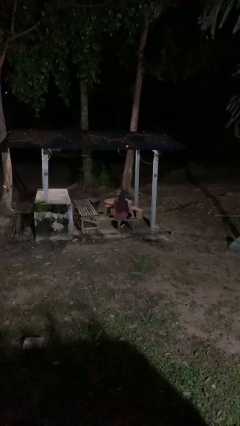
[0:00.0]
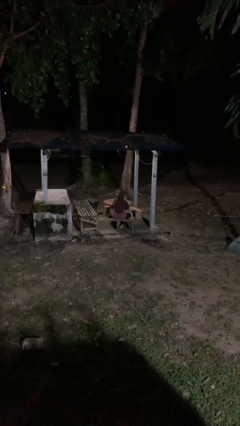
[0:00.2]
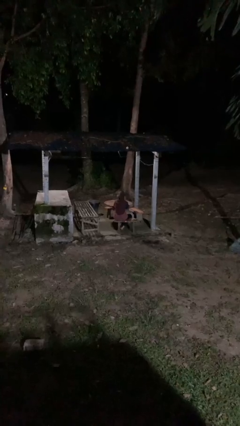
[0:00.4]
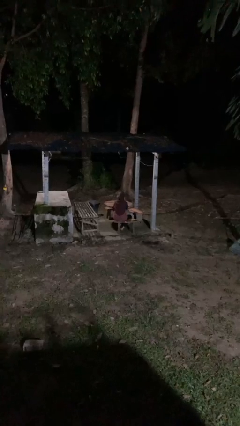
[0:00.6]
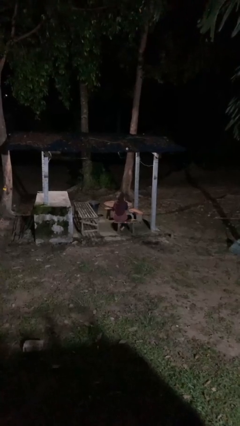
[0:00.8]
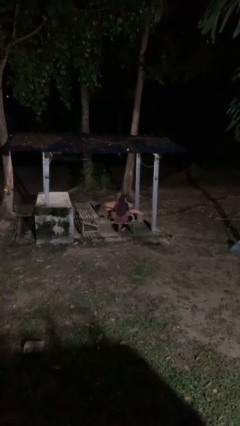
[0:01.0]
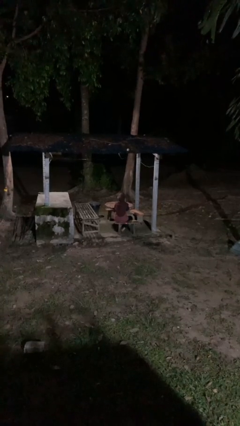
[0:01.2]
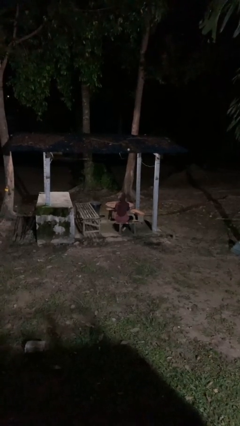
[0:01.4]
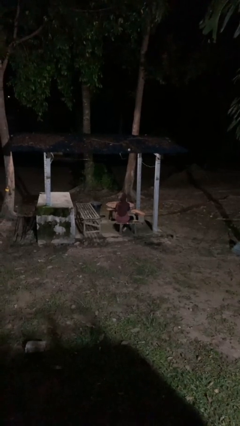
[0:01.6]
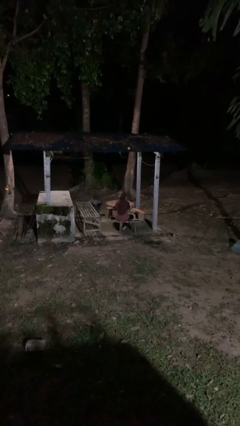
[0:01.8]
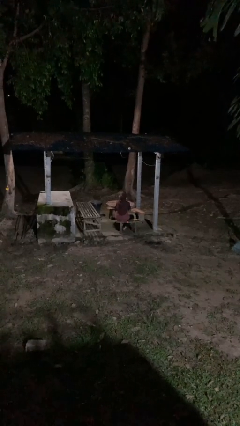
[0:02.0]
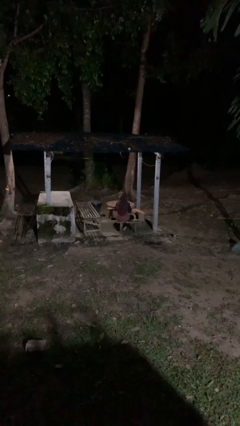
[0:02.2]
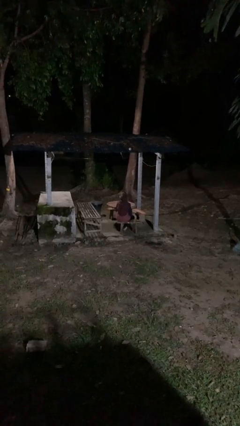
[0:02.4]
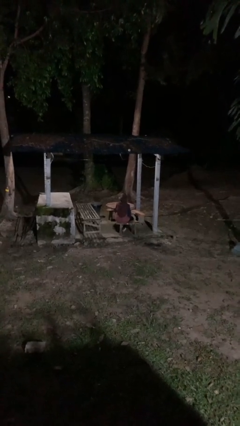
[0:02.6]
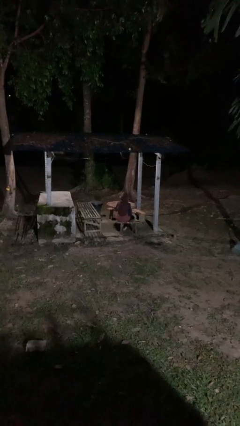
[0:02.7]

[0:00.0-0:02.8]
person strokes chin

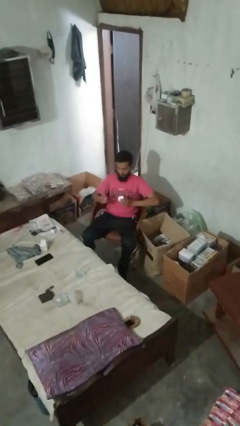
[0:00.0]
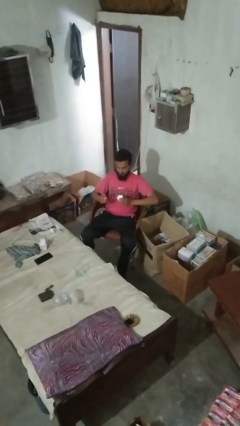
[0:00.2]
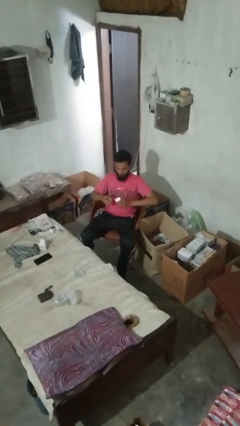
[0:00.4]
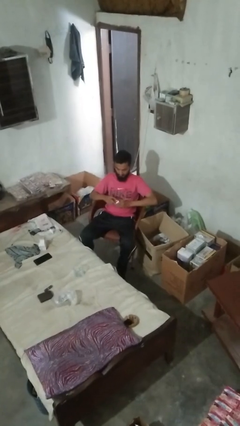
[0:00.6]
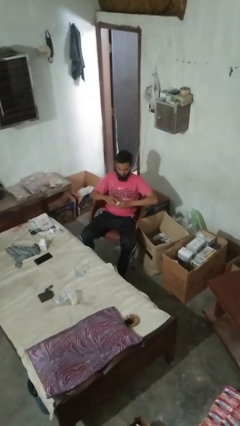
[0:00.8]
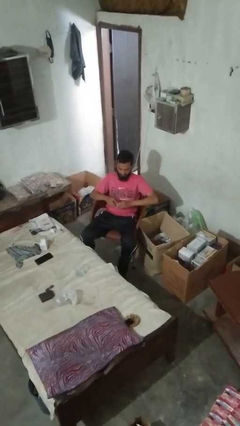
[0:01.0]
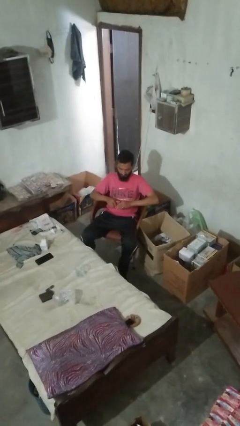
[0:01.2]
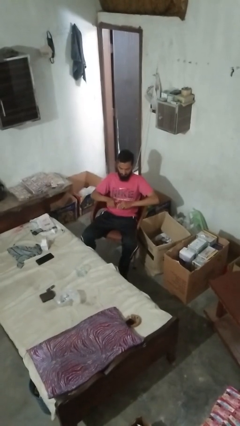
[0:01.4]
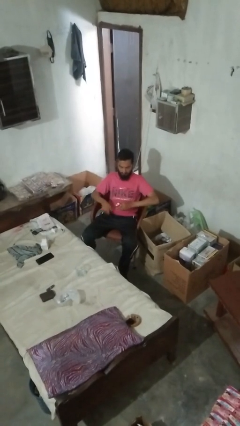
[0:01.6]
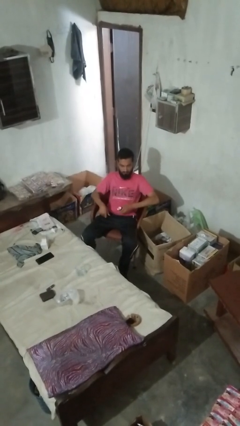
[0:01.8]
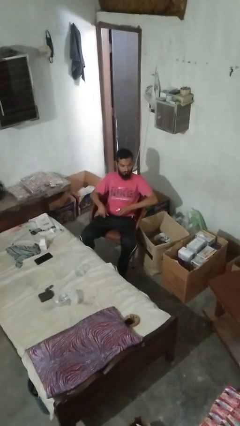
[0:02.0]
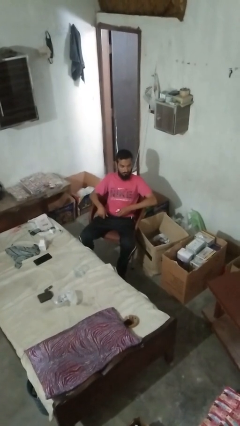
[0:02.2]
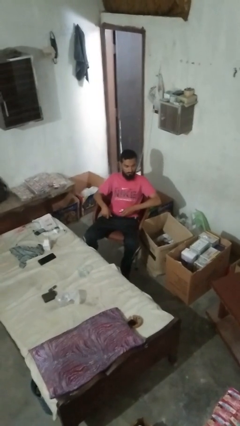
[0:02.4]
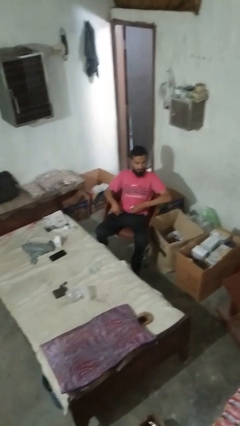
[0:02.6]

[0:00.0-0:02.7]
person closes jar

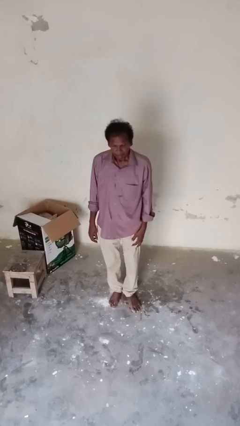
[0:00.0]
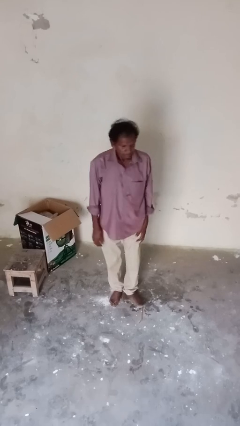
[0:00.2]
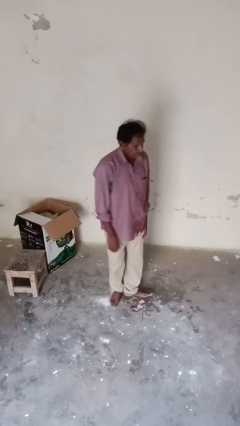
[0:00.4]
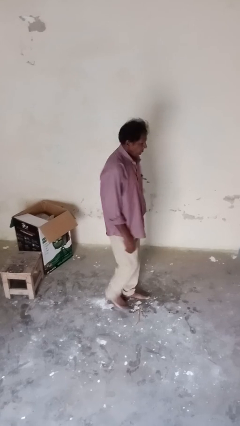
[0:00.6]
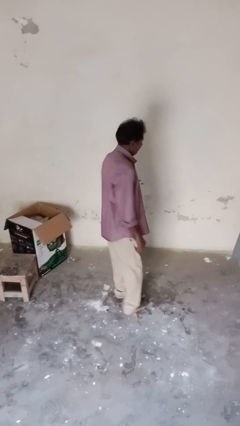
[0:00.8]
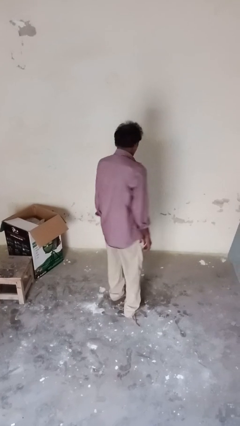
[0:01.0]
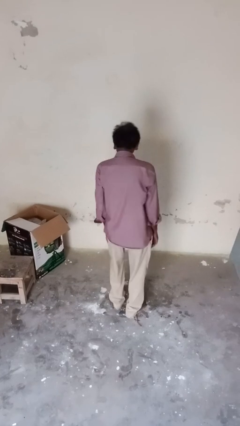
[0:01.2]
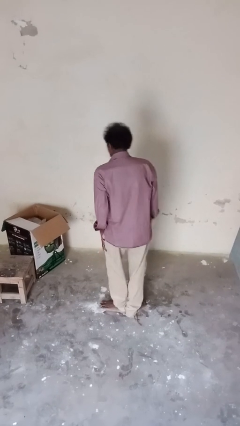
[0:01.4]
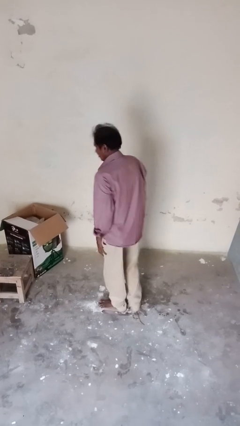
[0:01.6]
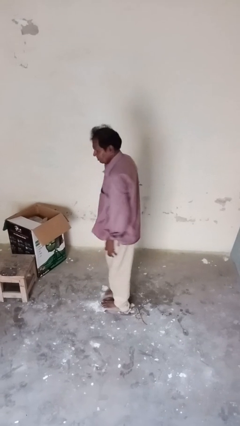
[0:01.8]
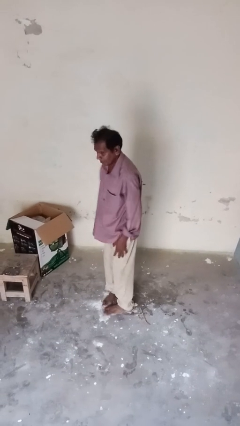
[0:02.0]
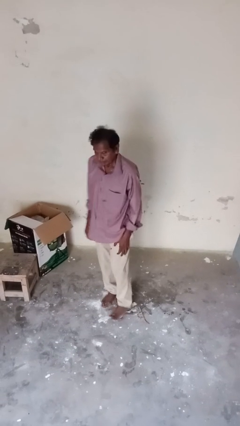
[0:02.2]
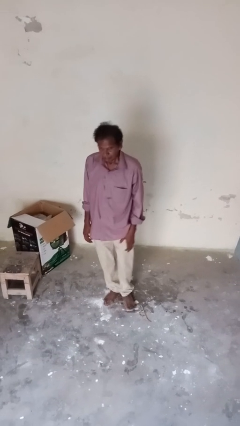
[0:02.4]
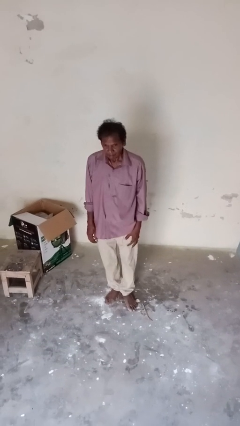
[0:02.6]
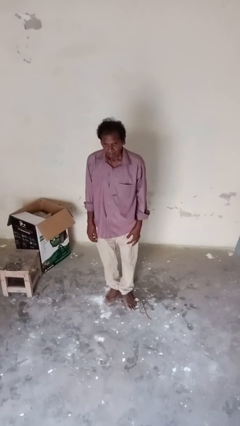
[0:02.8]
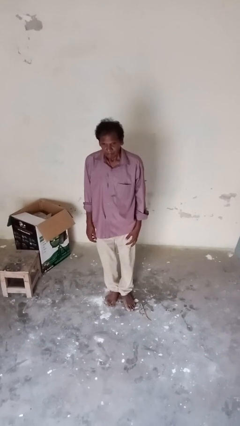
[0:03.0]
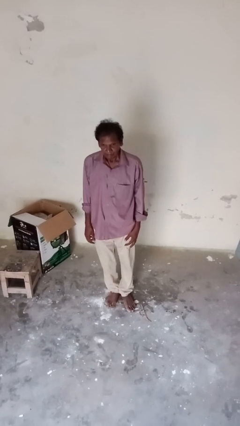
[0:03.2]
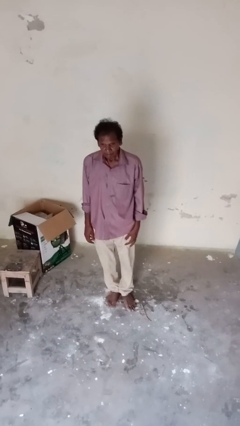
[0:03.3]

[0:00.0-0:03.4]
person twirls

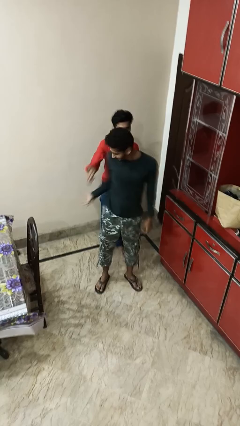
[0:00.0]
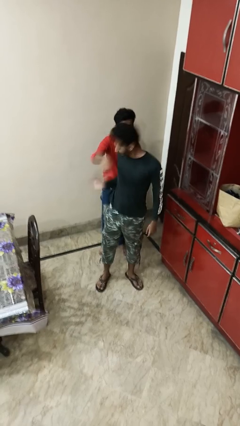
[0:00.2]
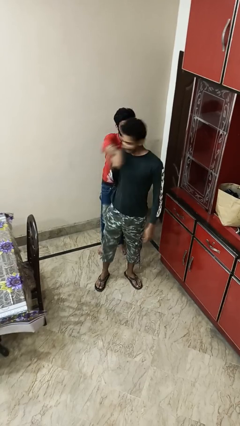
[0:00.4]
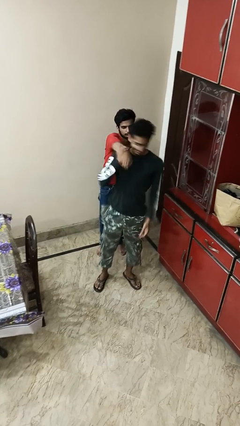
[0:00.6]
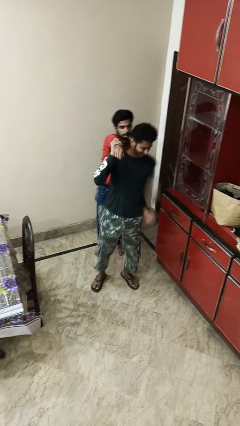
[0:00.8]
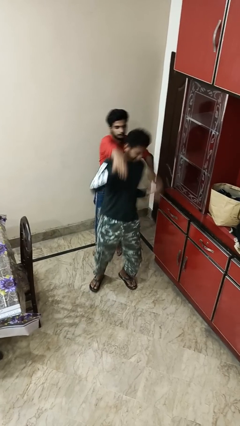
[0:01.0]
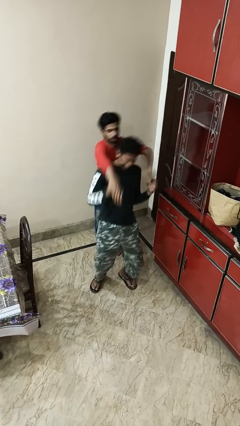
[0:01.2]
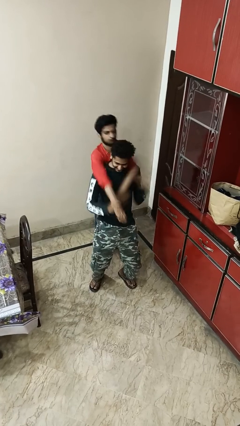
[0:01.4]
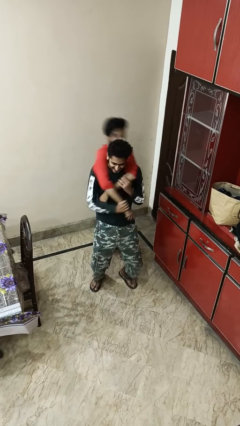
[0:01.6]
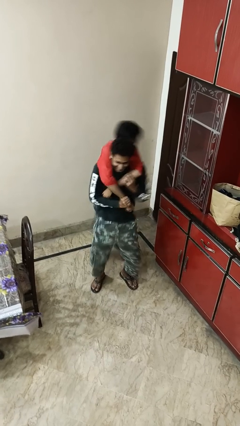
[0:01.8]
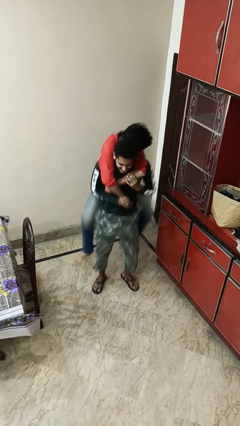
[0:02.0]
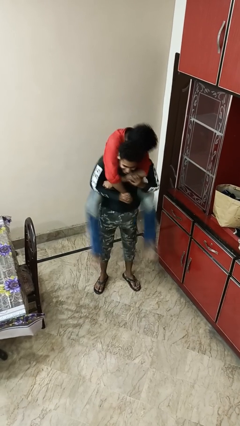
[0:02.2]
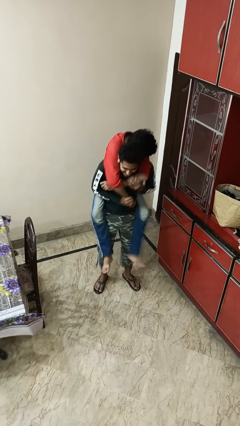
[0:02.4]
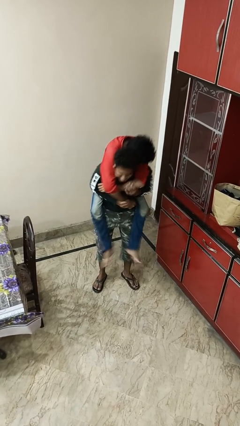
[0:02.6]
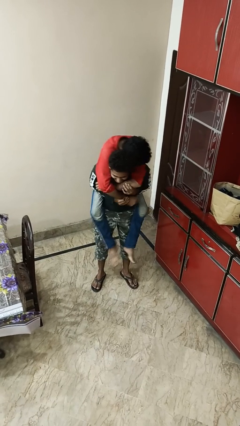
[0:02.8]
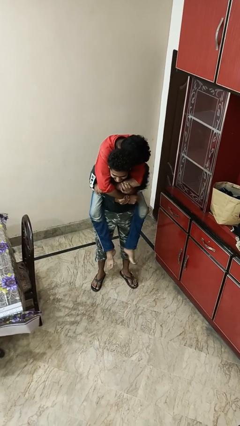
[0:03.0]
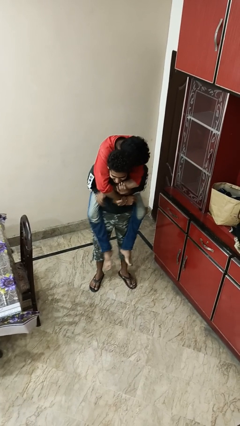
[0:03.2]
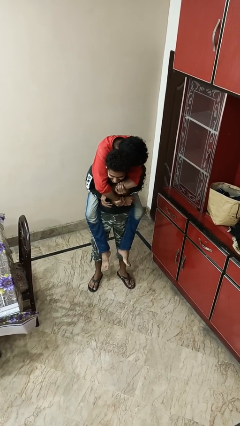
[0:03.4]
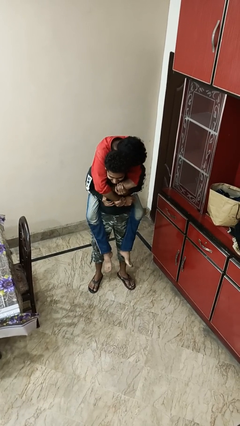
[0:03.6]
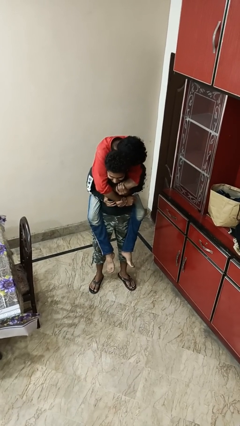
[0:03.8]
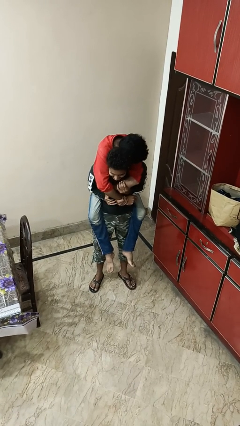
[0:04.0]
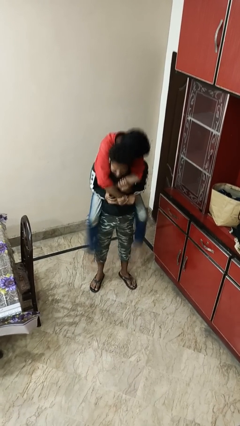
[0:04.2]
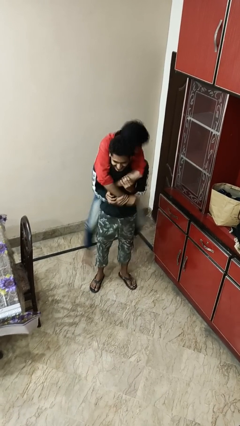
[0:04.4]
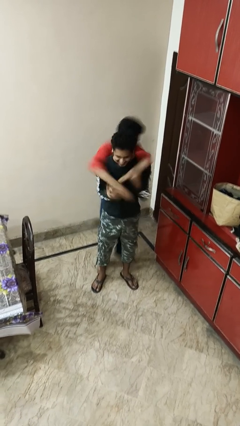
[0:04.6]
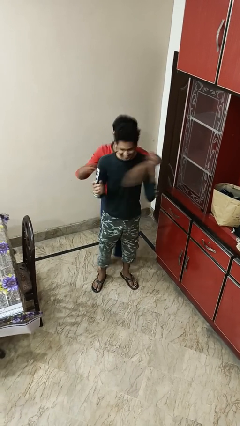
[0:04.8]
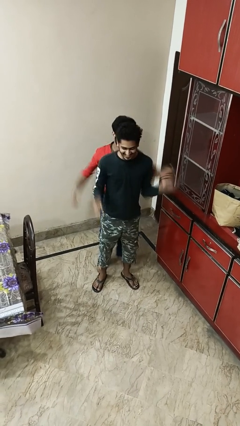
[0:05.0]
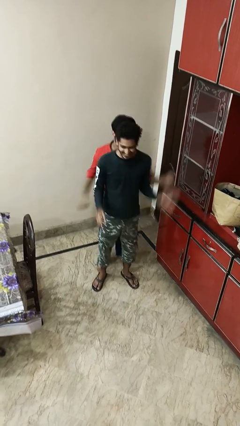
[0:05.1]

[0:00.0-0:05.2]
person carries person over shoulder

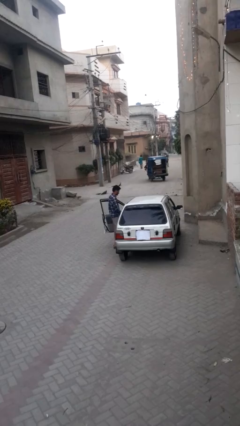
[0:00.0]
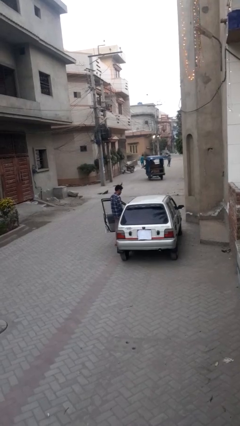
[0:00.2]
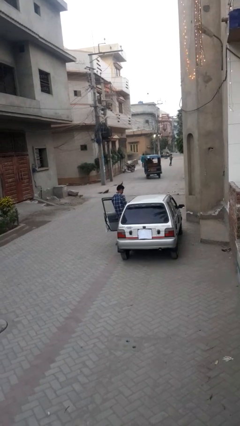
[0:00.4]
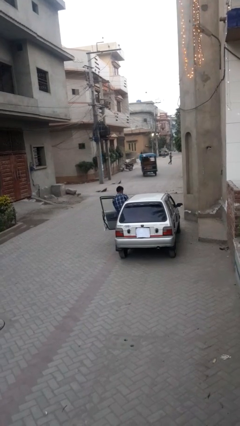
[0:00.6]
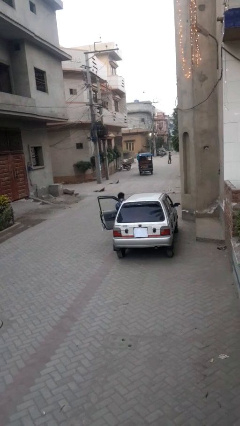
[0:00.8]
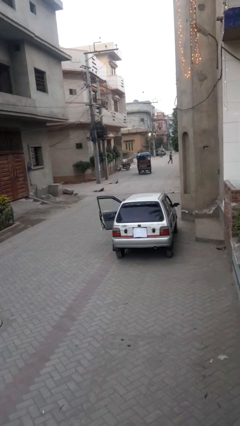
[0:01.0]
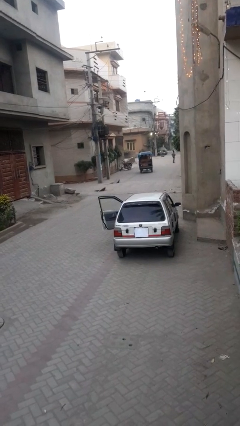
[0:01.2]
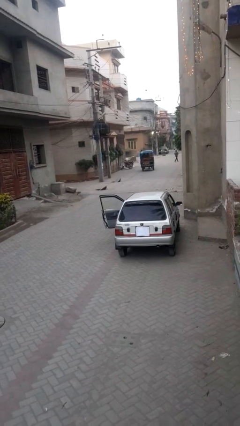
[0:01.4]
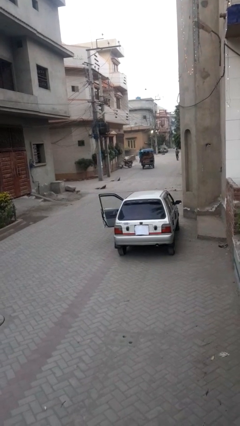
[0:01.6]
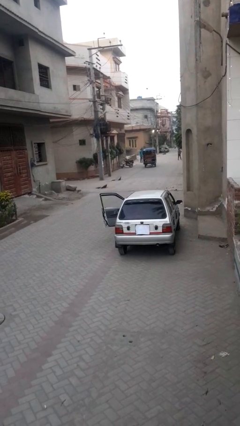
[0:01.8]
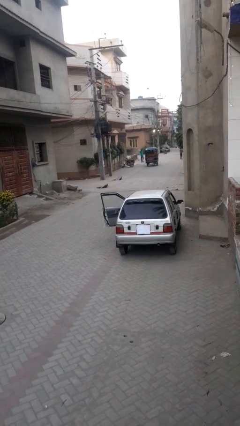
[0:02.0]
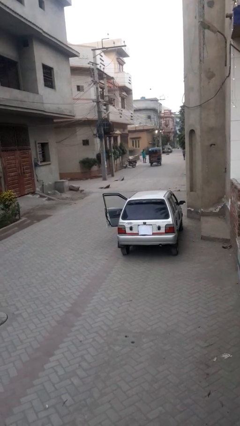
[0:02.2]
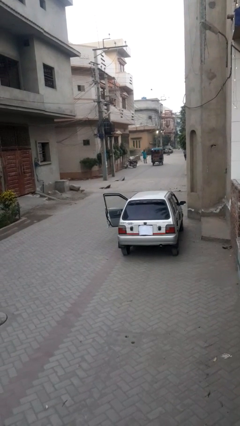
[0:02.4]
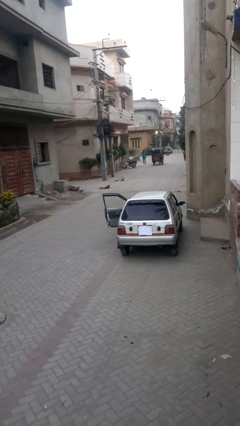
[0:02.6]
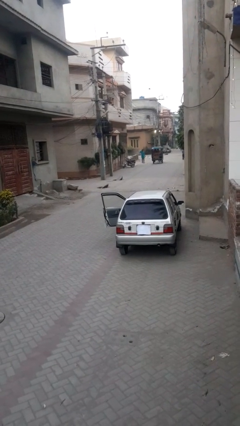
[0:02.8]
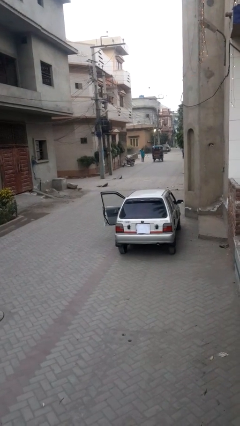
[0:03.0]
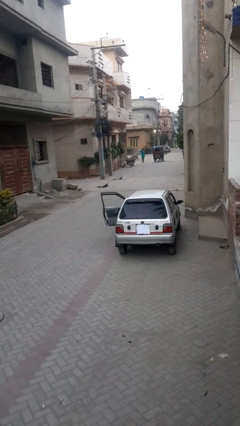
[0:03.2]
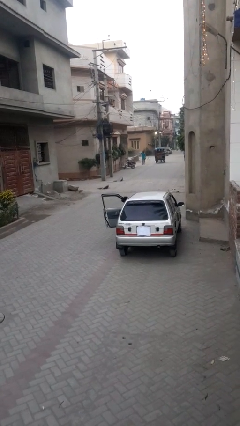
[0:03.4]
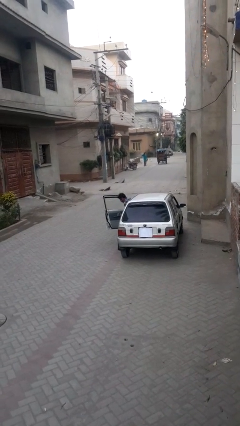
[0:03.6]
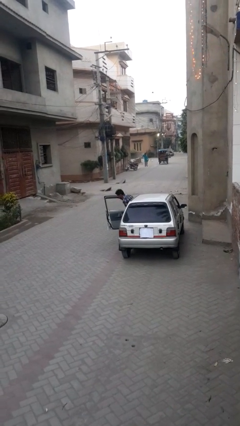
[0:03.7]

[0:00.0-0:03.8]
person enters car
